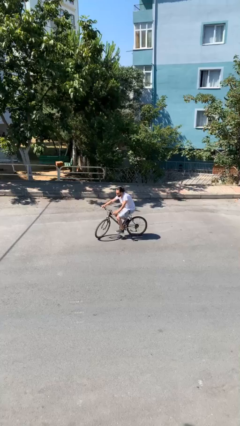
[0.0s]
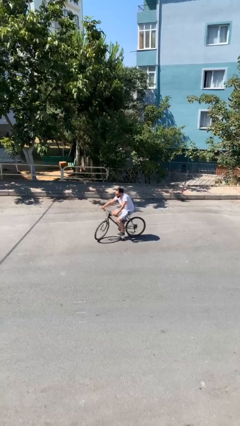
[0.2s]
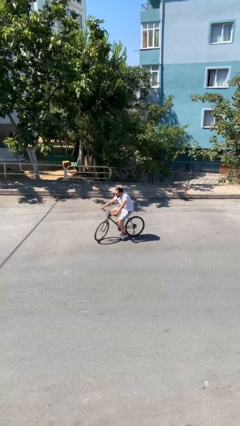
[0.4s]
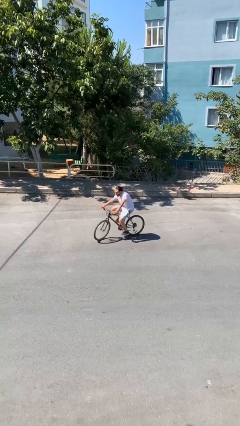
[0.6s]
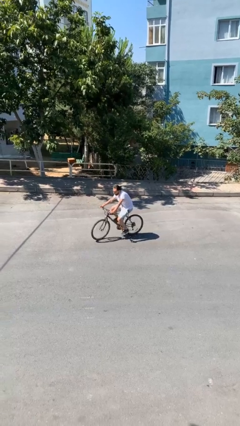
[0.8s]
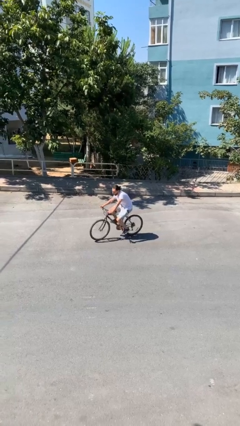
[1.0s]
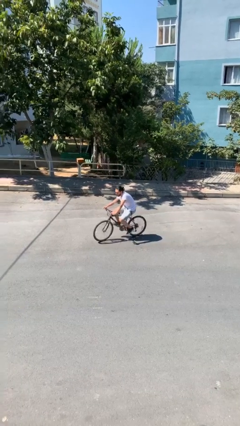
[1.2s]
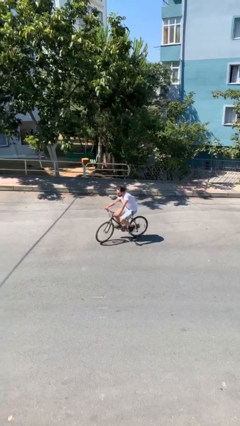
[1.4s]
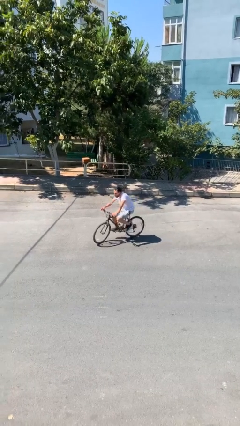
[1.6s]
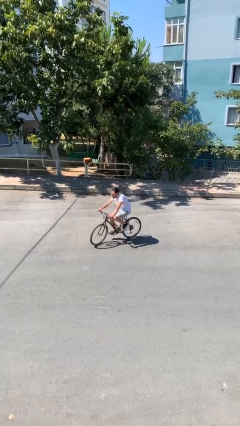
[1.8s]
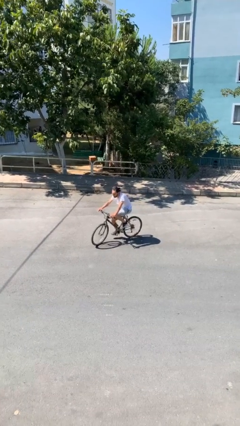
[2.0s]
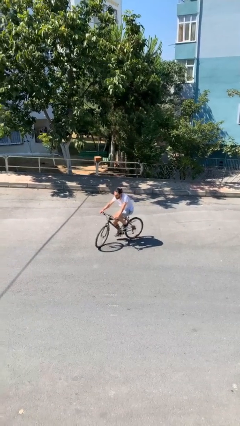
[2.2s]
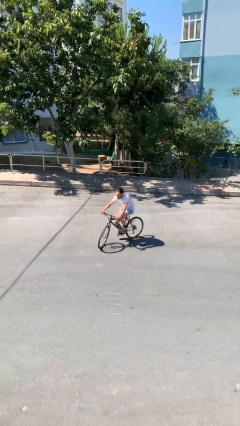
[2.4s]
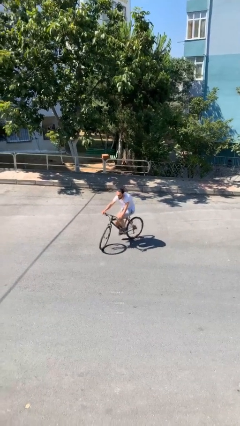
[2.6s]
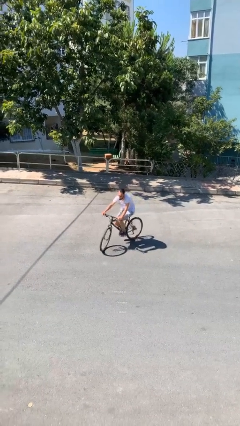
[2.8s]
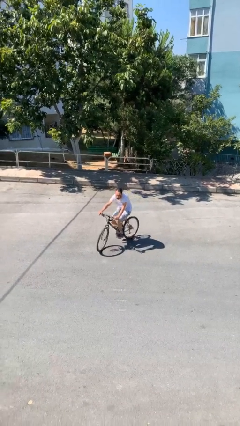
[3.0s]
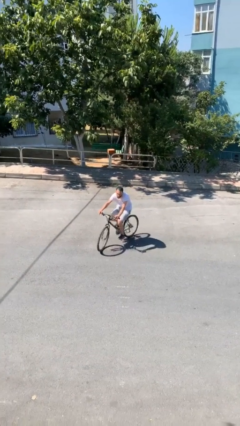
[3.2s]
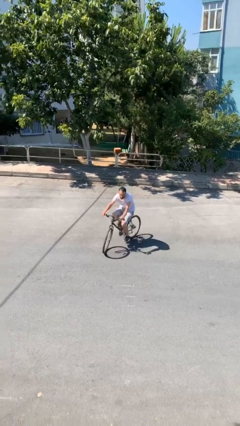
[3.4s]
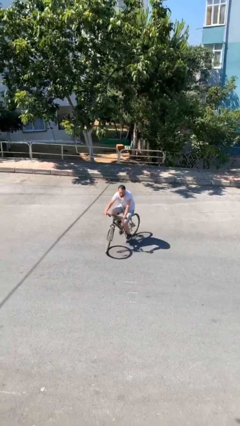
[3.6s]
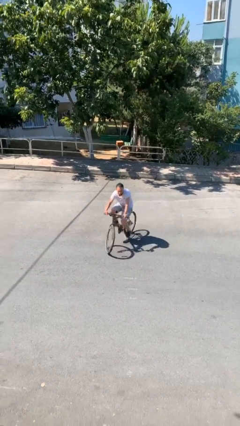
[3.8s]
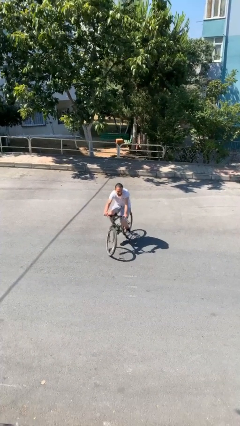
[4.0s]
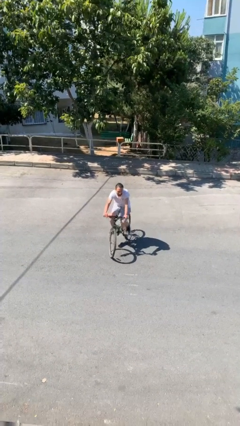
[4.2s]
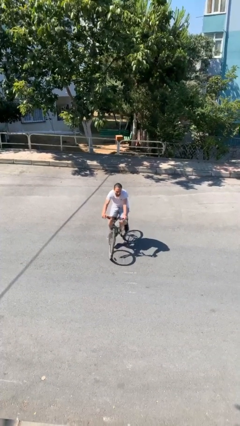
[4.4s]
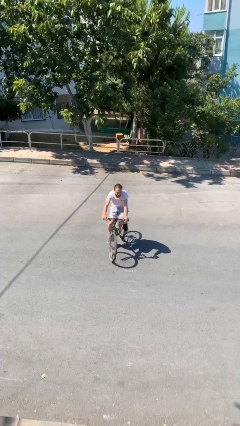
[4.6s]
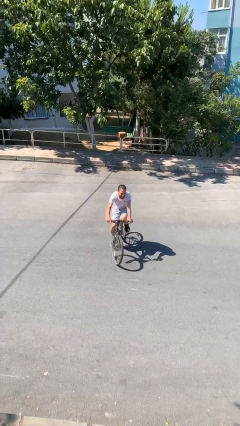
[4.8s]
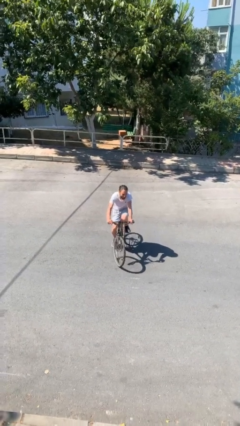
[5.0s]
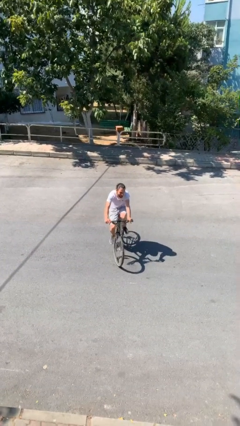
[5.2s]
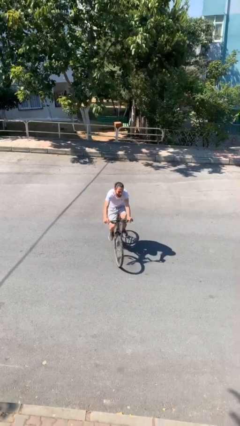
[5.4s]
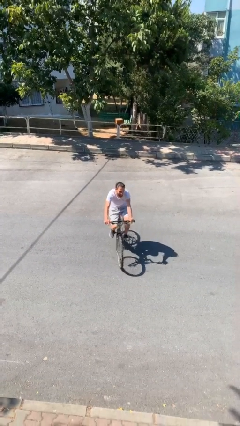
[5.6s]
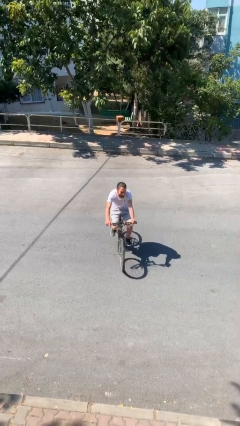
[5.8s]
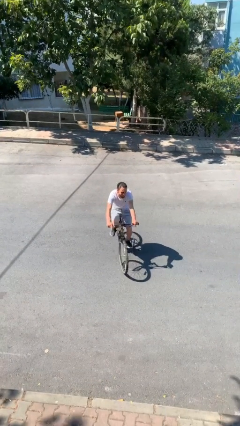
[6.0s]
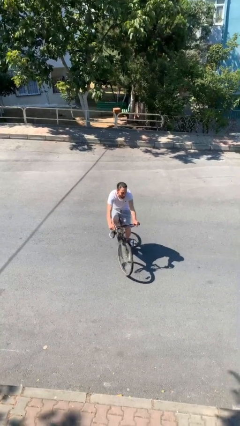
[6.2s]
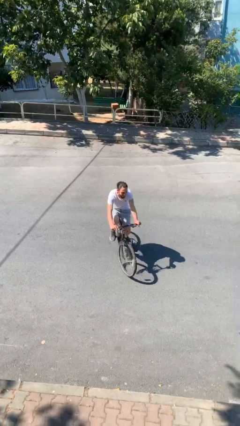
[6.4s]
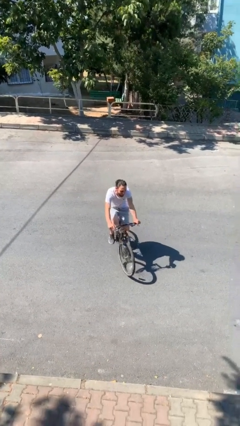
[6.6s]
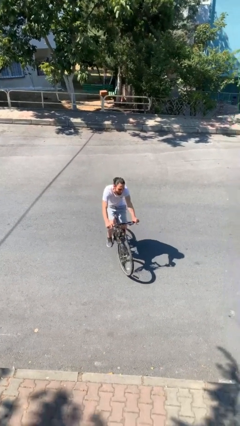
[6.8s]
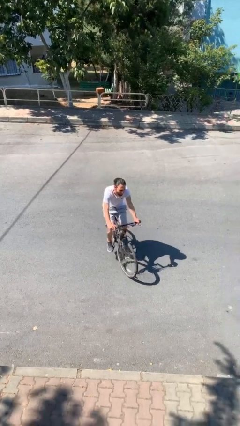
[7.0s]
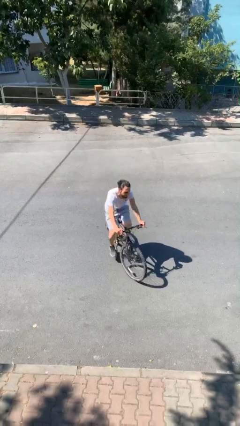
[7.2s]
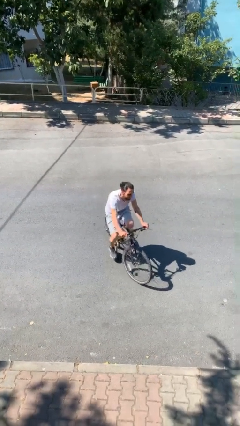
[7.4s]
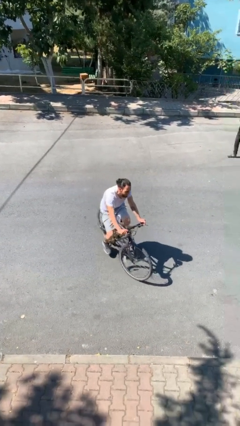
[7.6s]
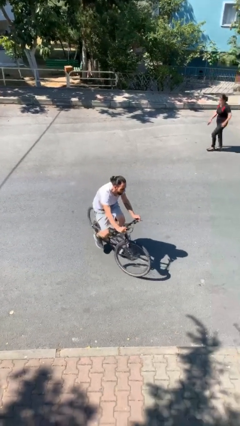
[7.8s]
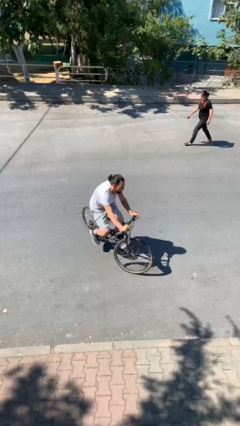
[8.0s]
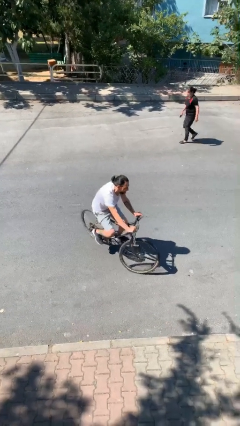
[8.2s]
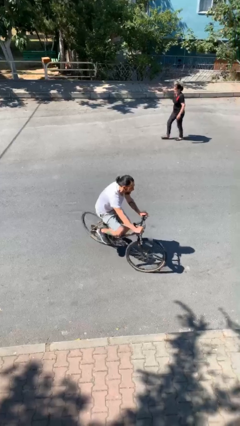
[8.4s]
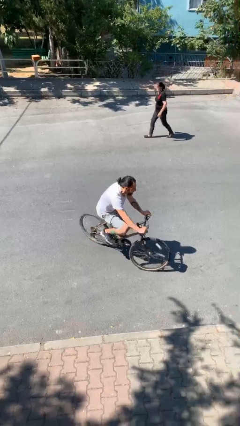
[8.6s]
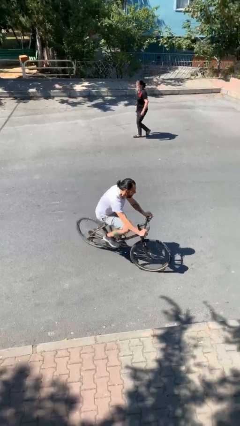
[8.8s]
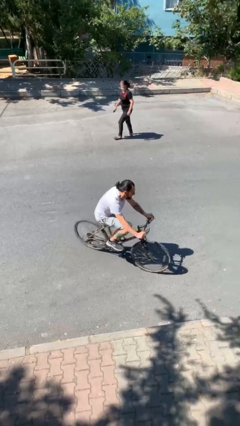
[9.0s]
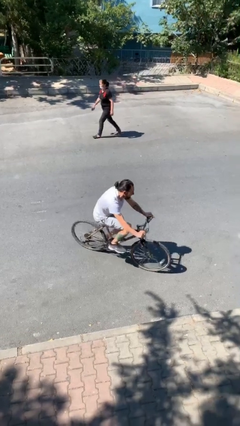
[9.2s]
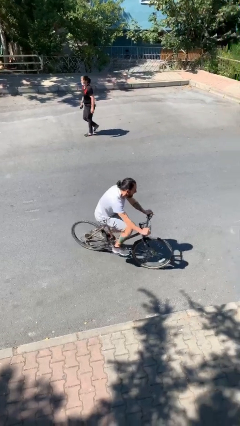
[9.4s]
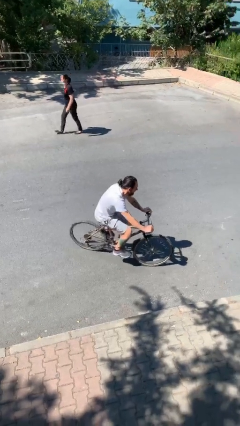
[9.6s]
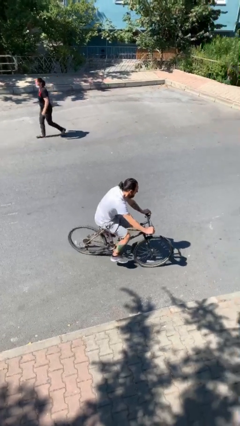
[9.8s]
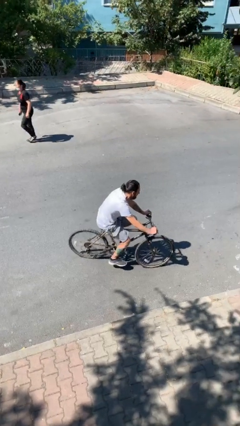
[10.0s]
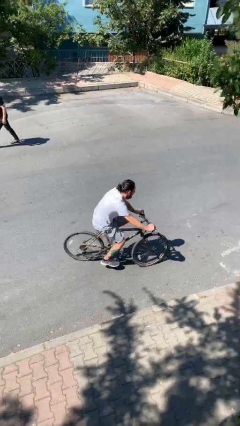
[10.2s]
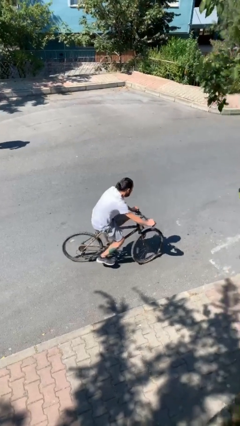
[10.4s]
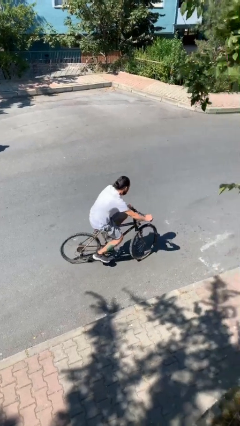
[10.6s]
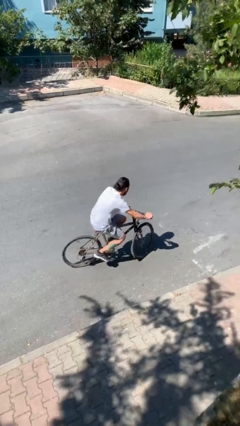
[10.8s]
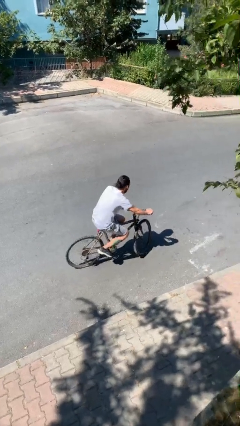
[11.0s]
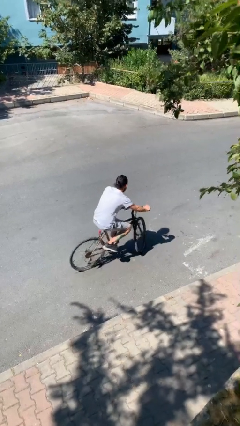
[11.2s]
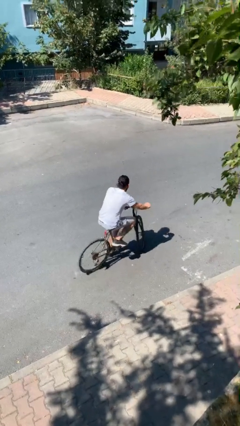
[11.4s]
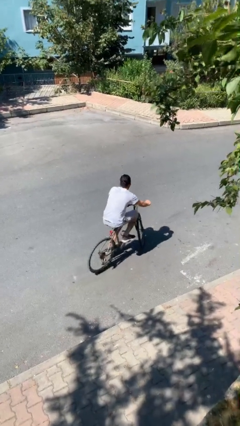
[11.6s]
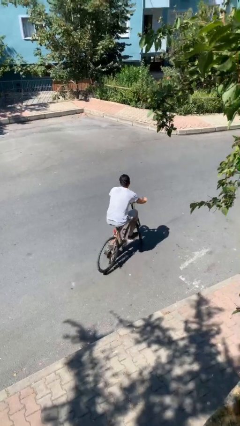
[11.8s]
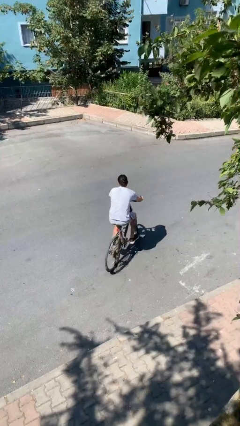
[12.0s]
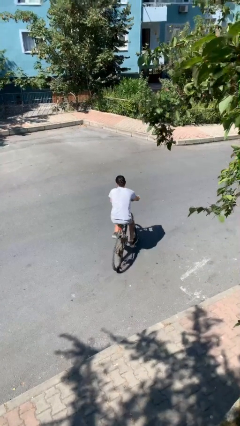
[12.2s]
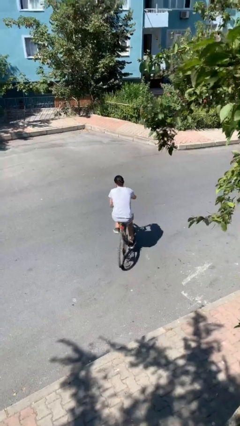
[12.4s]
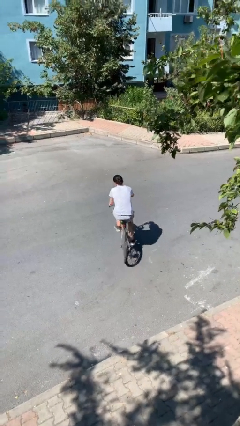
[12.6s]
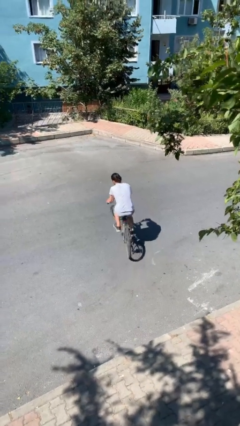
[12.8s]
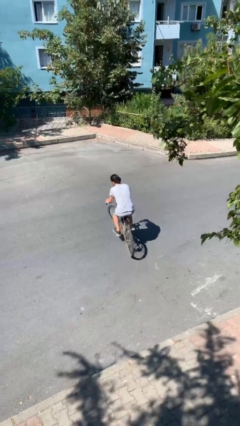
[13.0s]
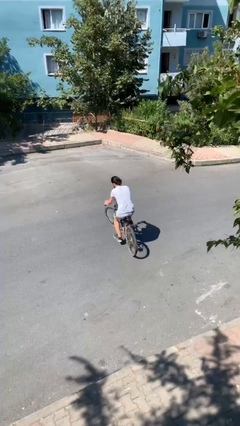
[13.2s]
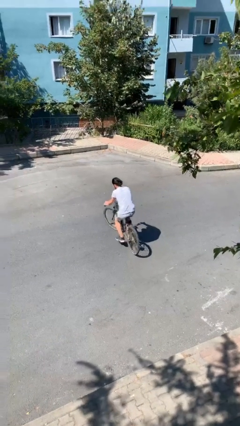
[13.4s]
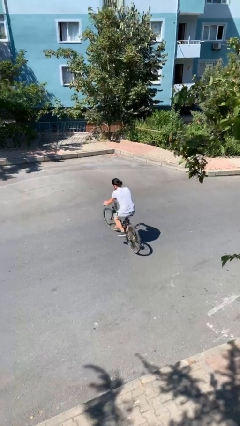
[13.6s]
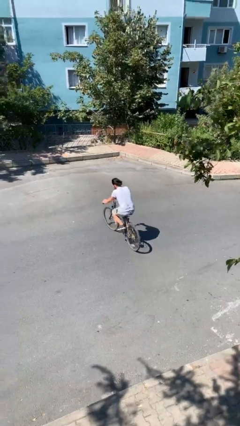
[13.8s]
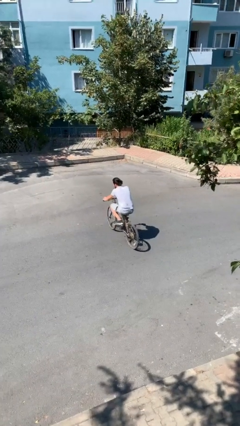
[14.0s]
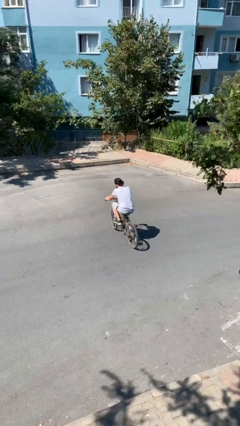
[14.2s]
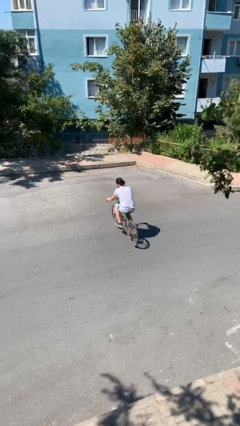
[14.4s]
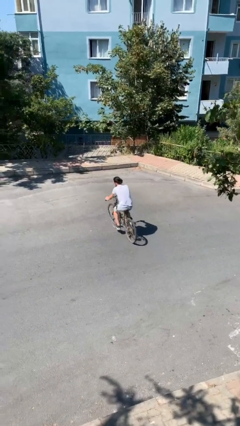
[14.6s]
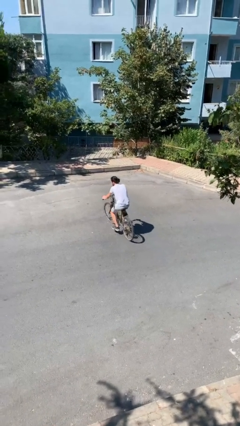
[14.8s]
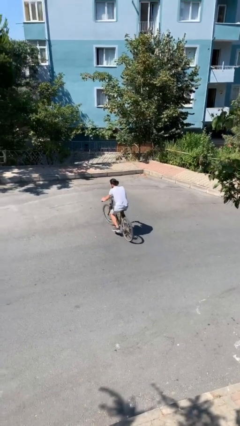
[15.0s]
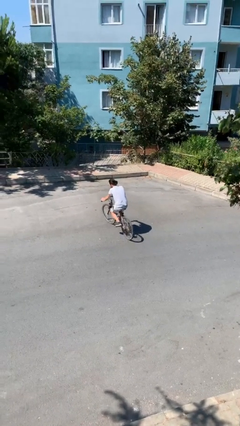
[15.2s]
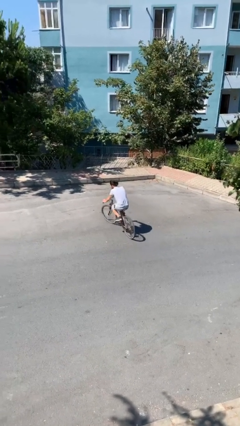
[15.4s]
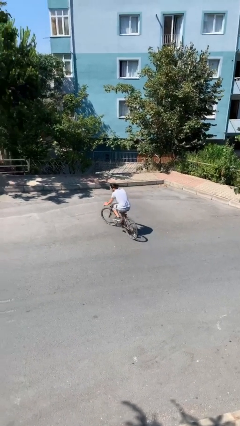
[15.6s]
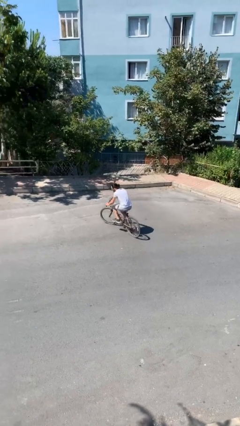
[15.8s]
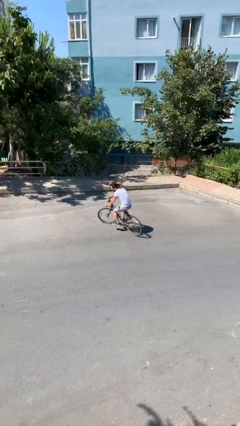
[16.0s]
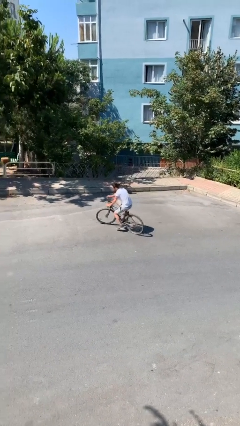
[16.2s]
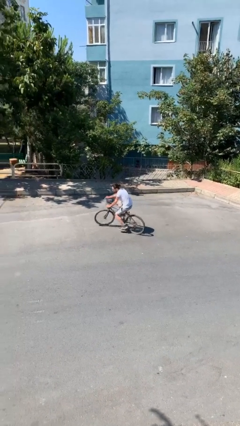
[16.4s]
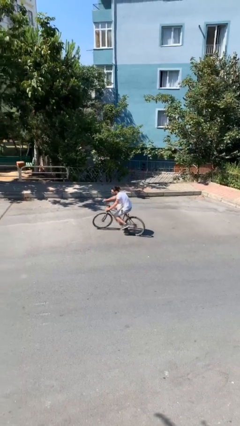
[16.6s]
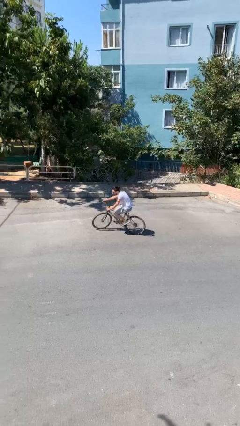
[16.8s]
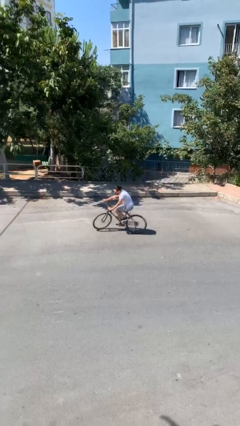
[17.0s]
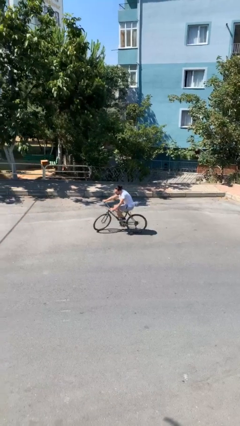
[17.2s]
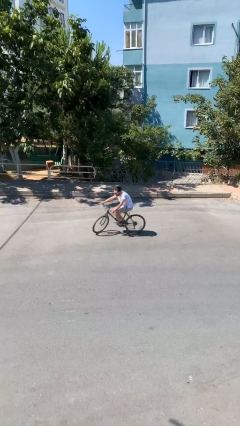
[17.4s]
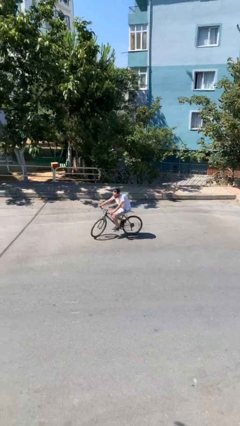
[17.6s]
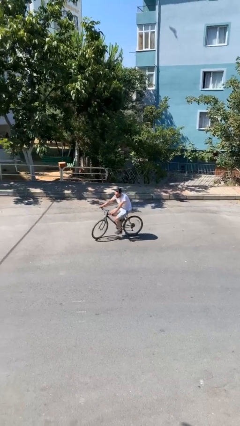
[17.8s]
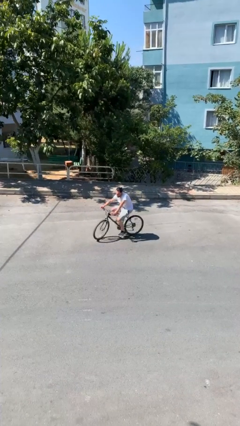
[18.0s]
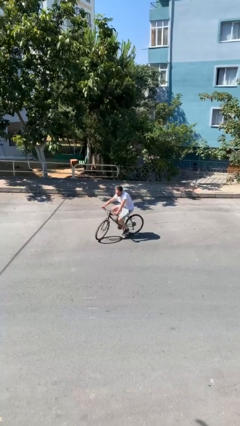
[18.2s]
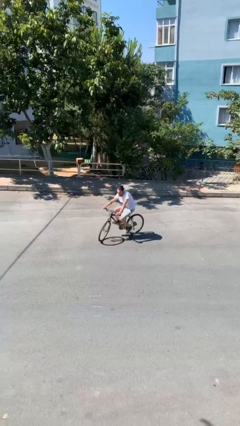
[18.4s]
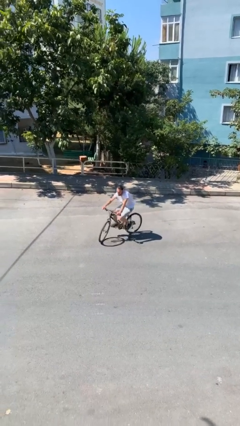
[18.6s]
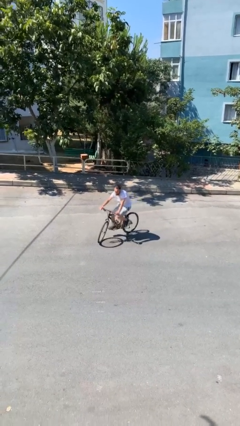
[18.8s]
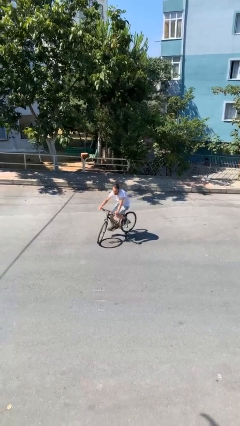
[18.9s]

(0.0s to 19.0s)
person rides bicycle
